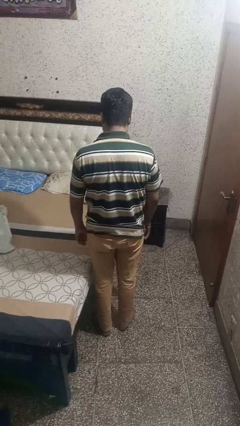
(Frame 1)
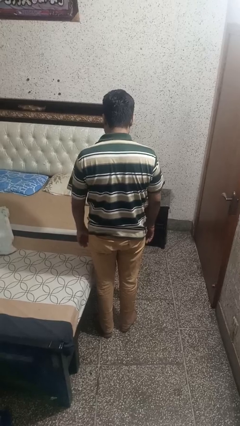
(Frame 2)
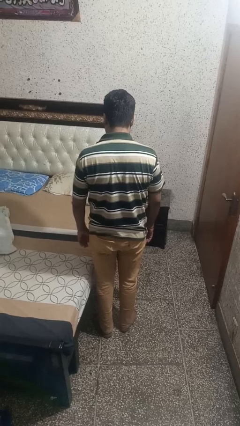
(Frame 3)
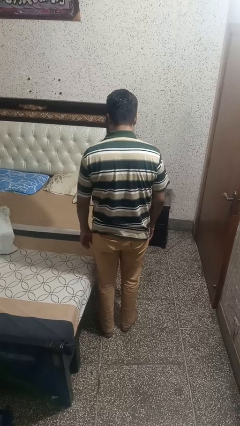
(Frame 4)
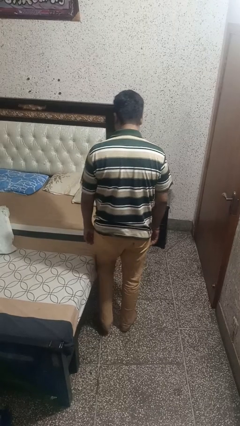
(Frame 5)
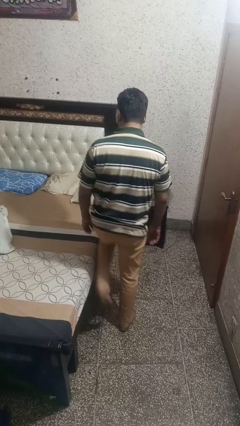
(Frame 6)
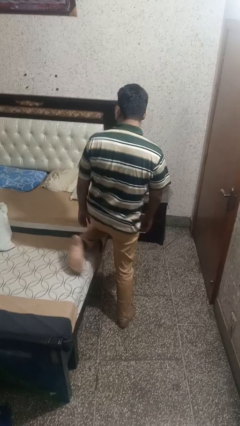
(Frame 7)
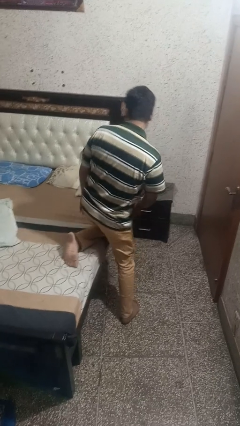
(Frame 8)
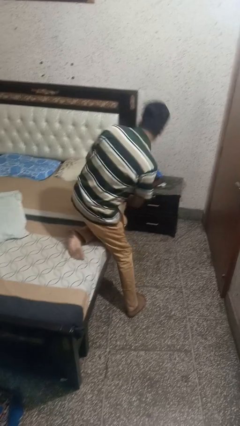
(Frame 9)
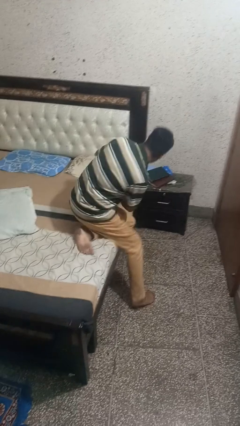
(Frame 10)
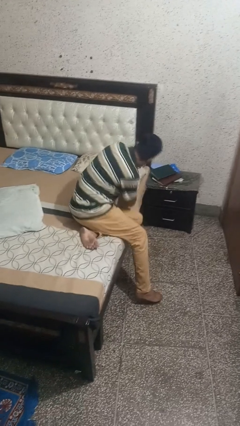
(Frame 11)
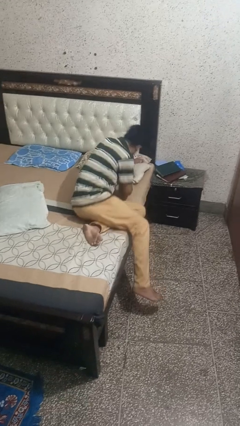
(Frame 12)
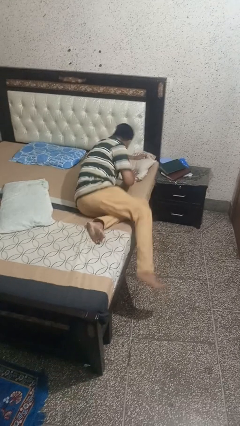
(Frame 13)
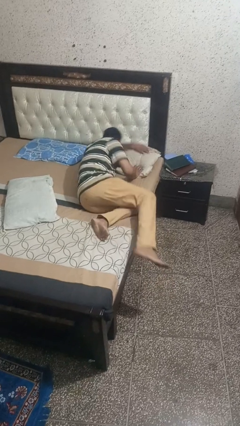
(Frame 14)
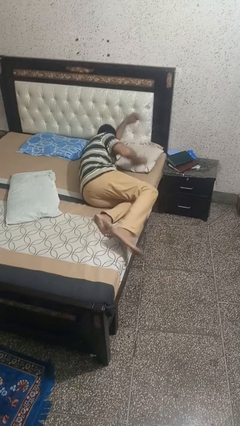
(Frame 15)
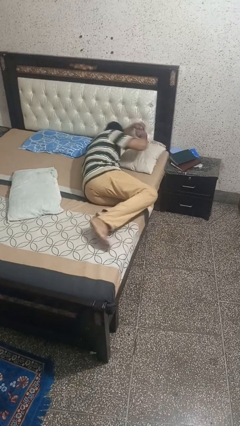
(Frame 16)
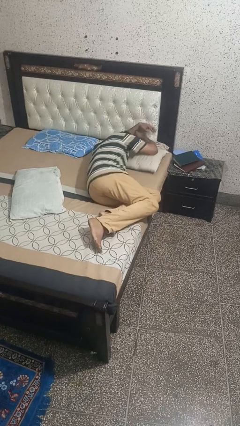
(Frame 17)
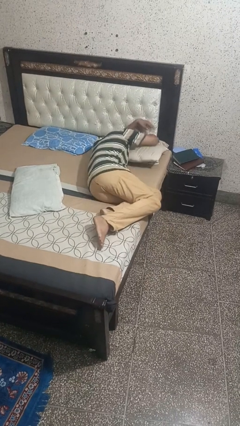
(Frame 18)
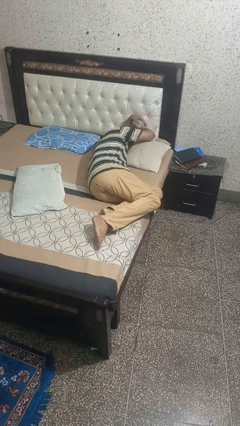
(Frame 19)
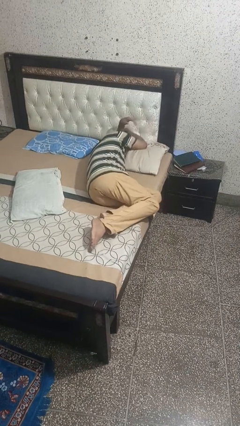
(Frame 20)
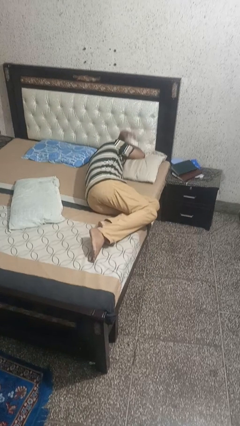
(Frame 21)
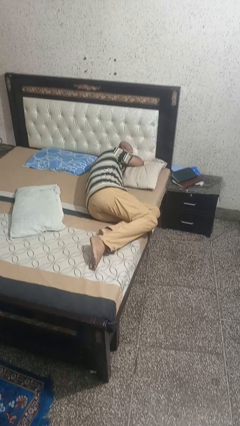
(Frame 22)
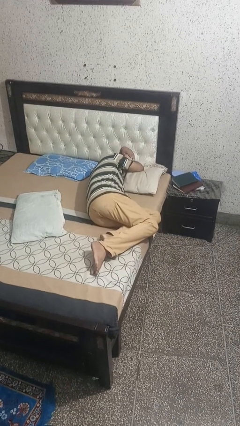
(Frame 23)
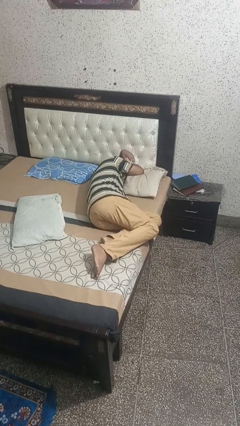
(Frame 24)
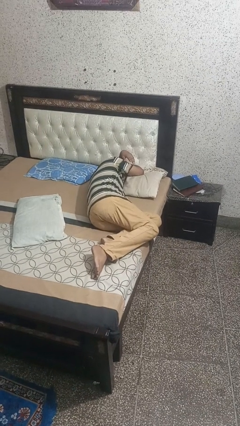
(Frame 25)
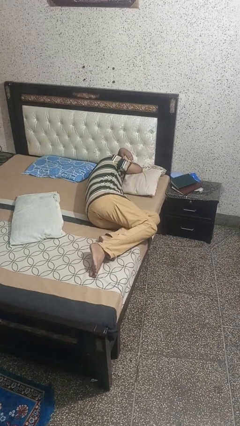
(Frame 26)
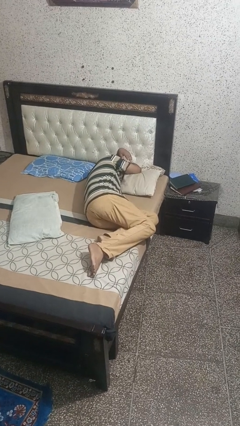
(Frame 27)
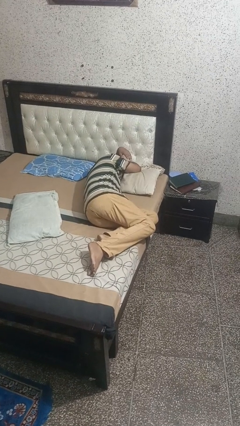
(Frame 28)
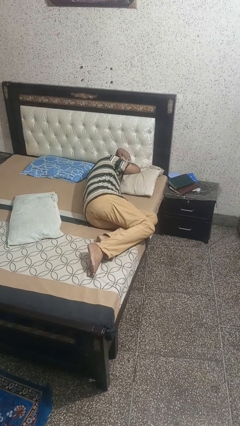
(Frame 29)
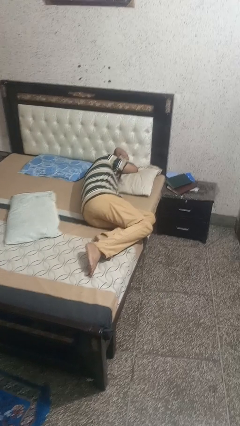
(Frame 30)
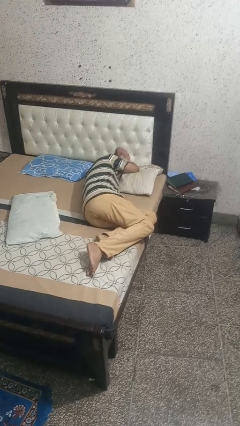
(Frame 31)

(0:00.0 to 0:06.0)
person lies down on bed

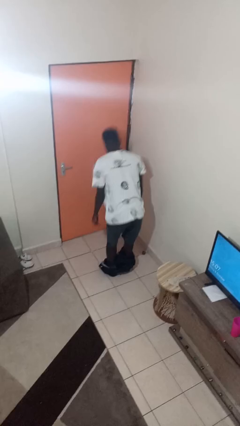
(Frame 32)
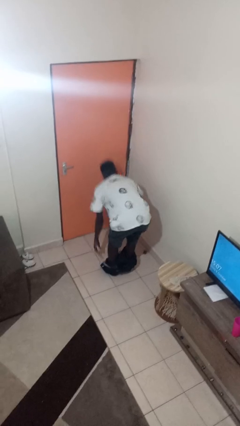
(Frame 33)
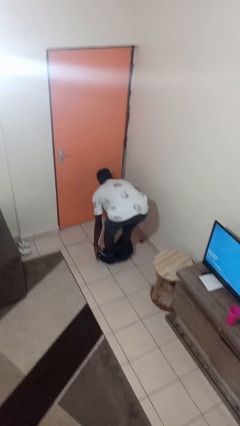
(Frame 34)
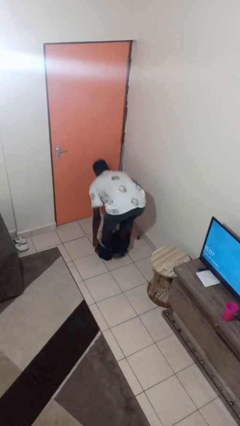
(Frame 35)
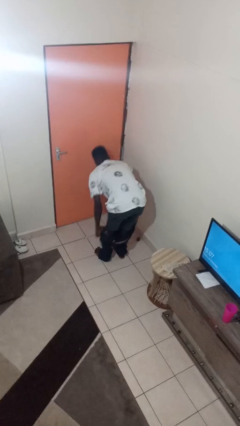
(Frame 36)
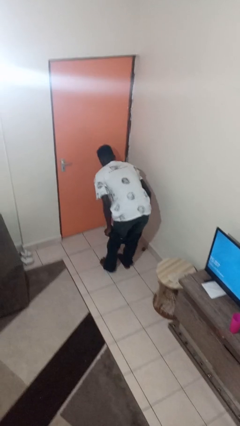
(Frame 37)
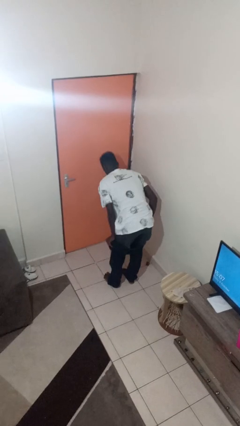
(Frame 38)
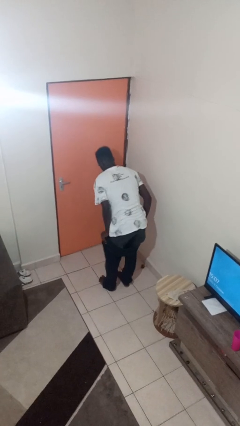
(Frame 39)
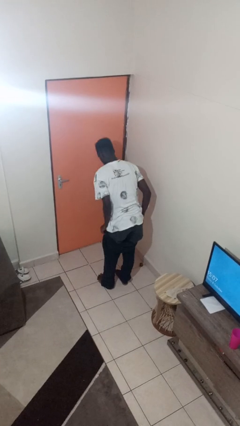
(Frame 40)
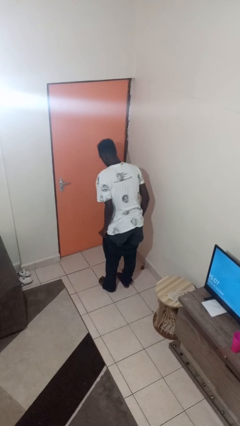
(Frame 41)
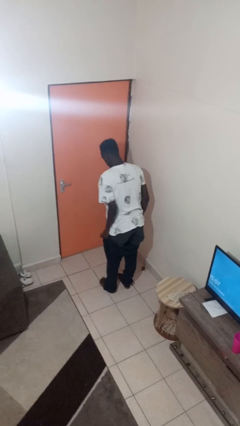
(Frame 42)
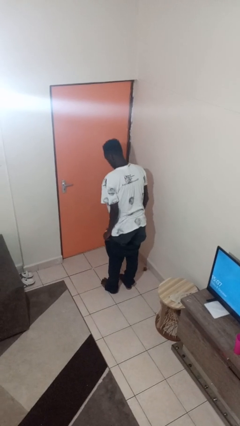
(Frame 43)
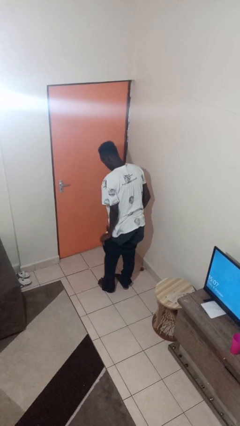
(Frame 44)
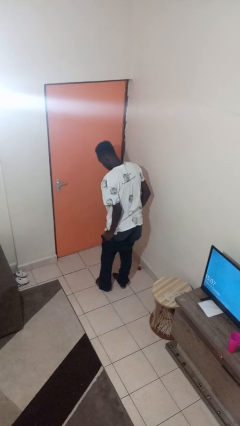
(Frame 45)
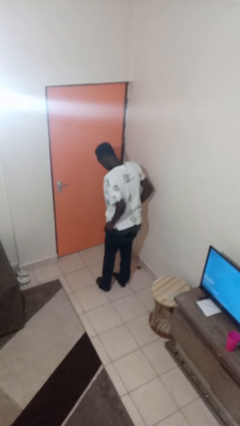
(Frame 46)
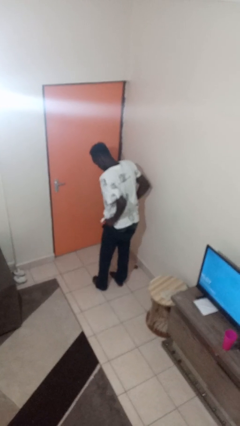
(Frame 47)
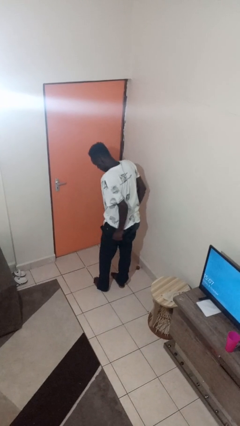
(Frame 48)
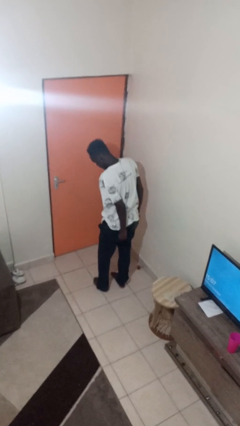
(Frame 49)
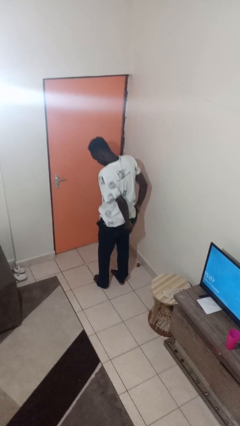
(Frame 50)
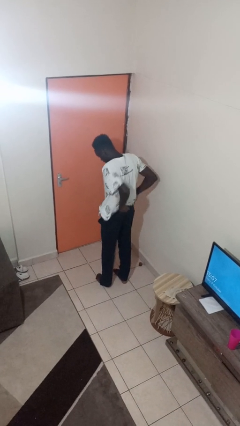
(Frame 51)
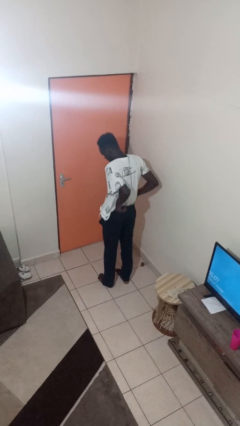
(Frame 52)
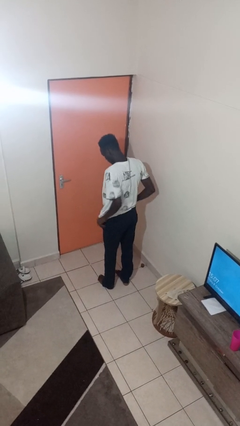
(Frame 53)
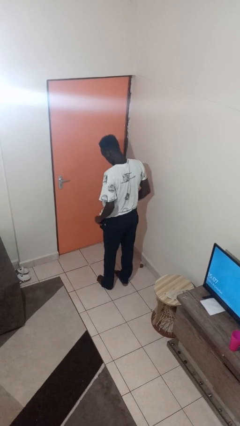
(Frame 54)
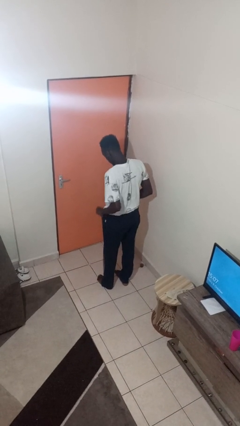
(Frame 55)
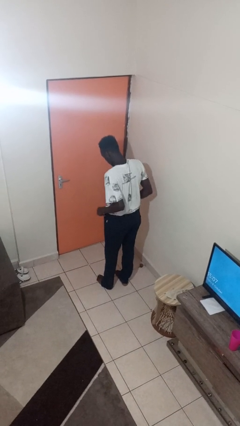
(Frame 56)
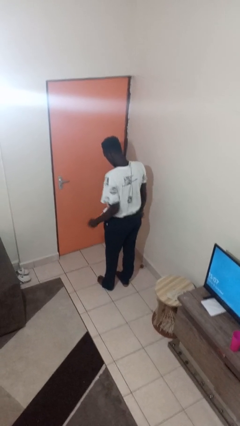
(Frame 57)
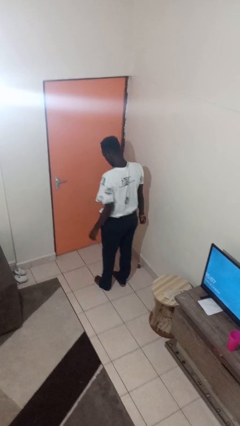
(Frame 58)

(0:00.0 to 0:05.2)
person puts on pants

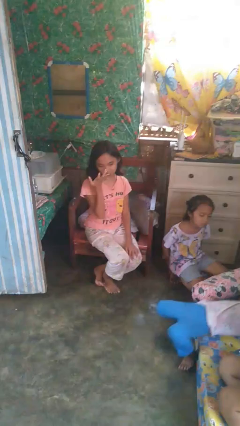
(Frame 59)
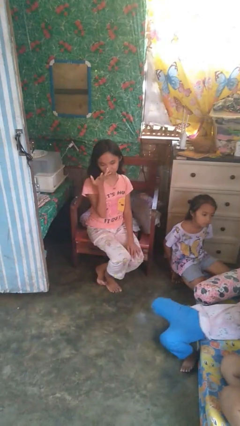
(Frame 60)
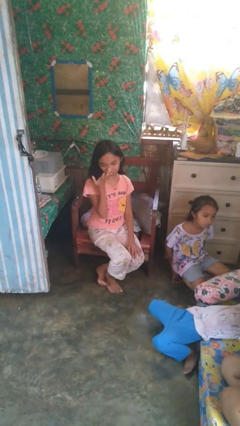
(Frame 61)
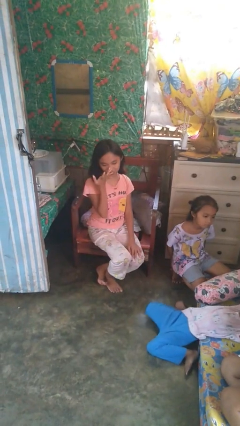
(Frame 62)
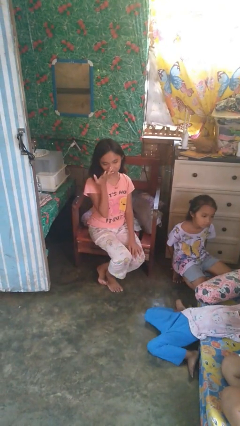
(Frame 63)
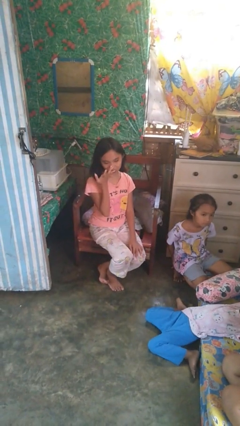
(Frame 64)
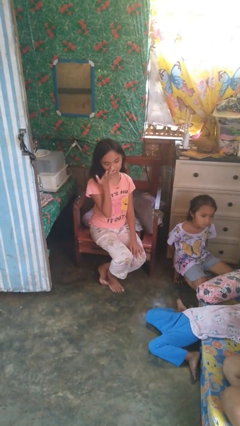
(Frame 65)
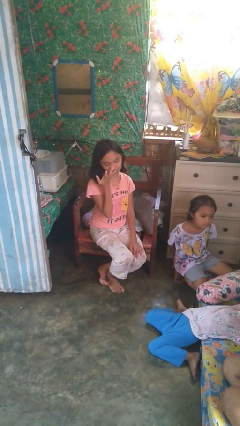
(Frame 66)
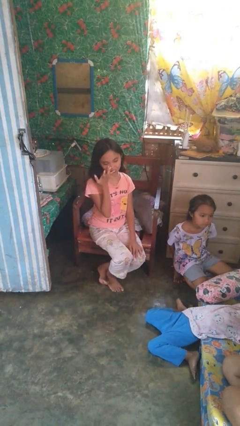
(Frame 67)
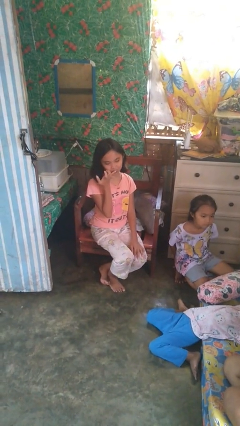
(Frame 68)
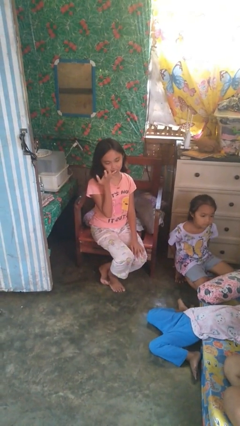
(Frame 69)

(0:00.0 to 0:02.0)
person licks fingers

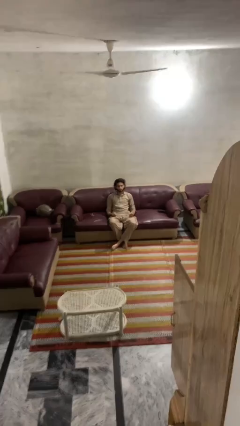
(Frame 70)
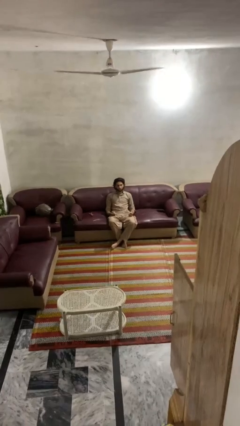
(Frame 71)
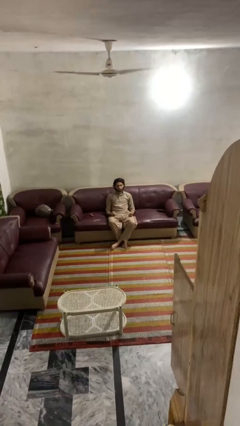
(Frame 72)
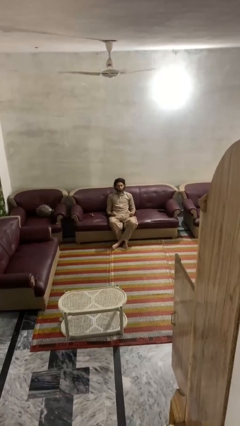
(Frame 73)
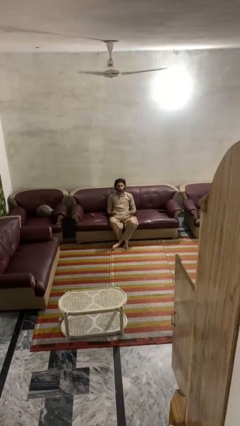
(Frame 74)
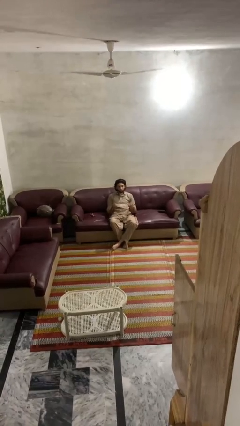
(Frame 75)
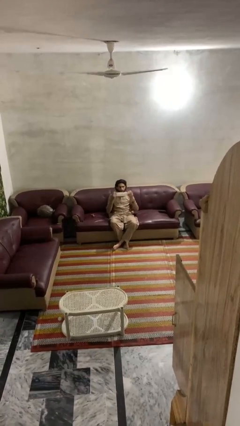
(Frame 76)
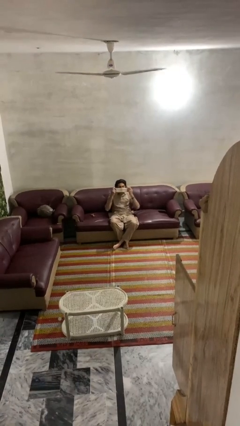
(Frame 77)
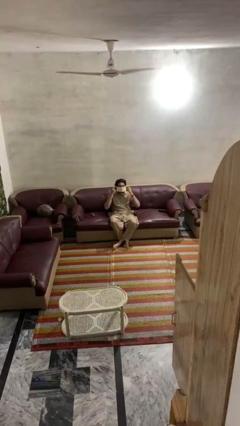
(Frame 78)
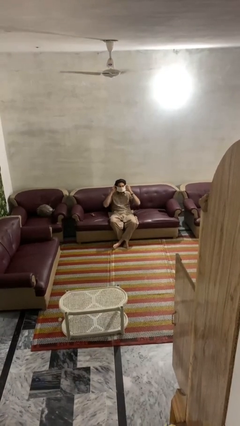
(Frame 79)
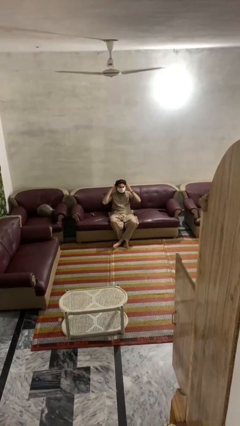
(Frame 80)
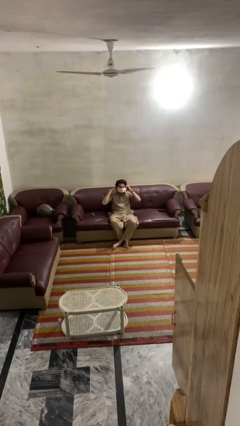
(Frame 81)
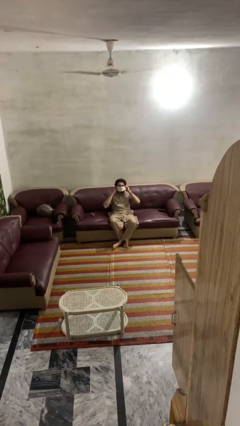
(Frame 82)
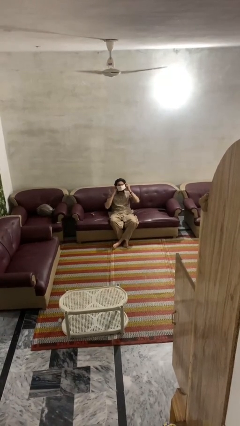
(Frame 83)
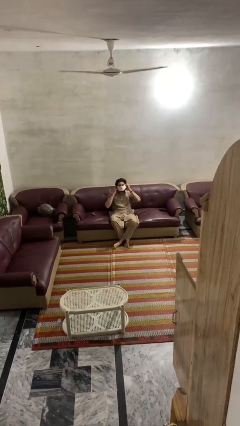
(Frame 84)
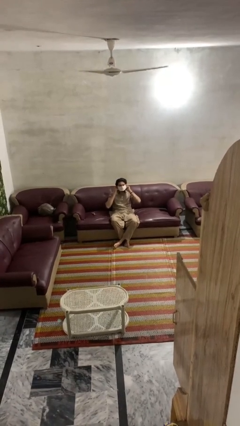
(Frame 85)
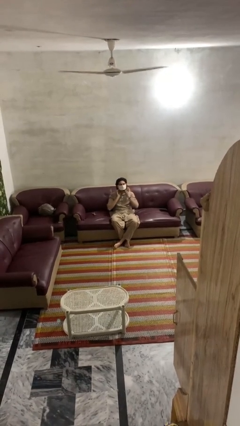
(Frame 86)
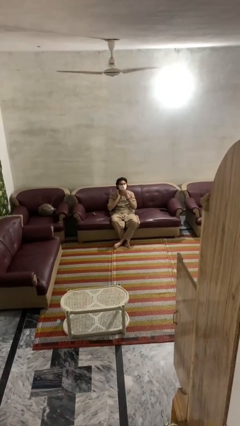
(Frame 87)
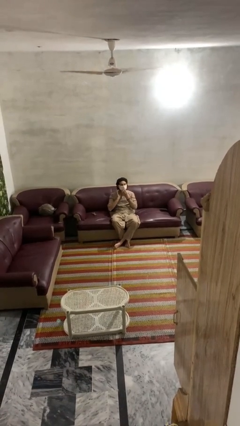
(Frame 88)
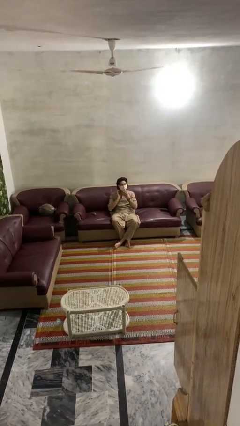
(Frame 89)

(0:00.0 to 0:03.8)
person puts on facemask

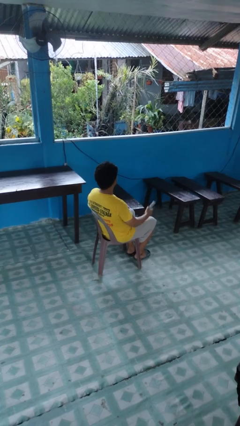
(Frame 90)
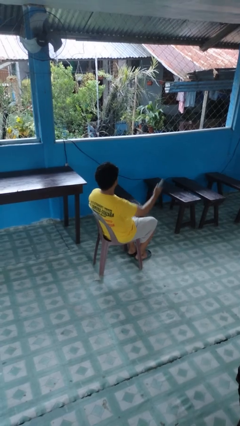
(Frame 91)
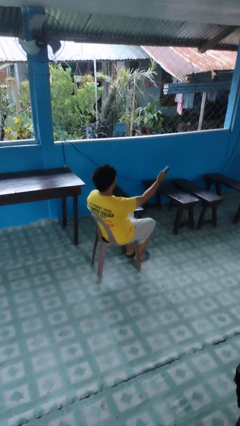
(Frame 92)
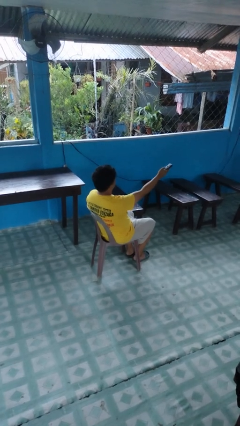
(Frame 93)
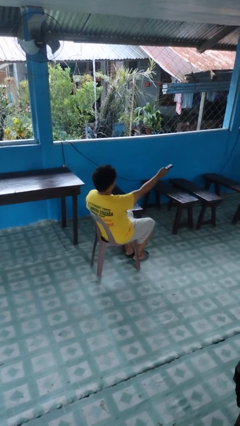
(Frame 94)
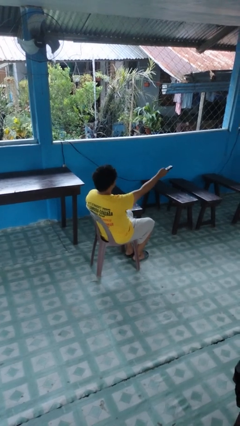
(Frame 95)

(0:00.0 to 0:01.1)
person uses television remote
